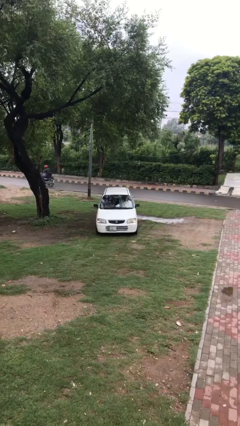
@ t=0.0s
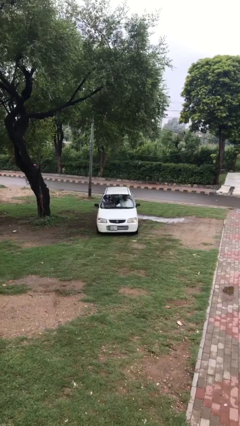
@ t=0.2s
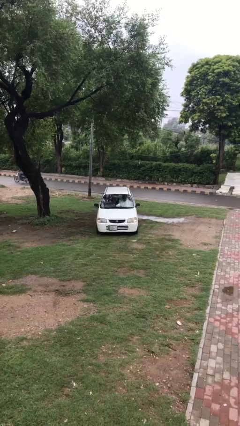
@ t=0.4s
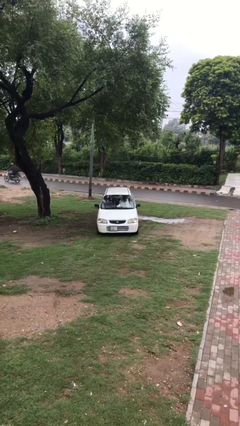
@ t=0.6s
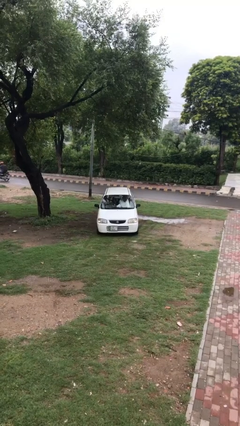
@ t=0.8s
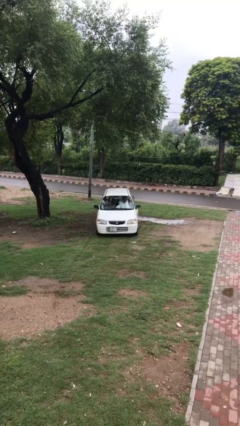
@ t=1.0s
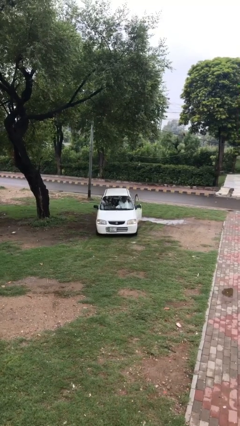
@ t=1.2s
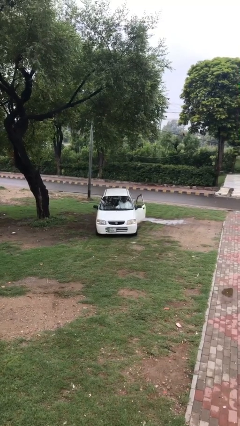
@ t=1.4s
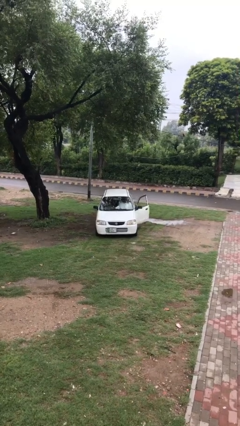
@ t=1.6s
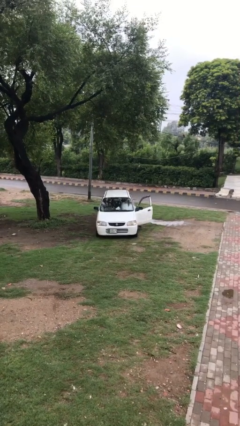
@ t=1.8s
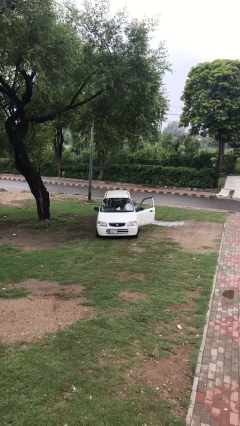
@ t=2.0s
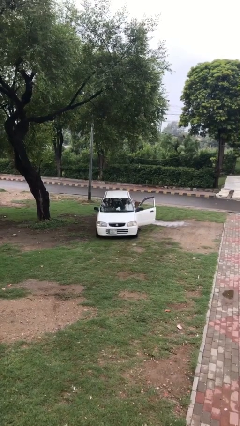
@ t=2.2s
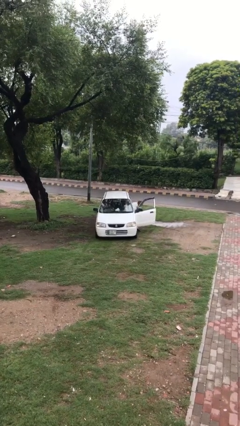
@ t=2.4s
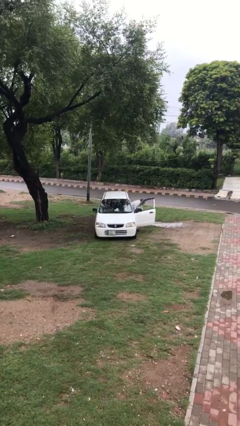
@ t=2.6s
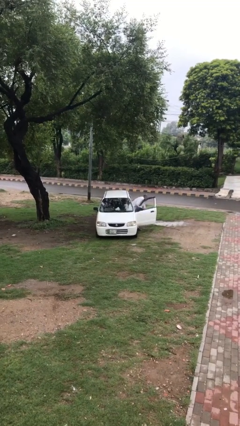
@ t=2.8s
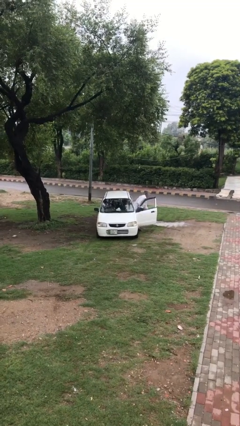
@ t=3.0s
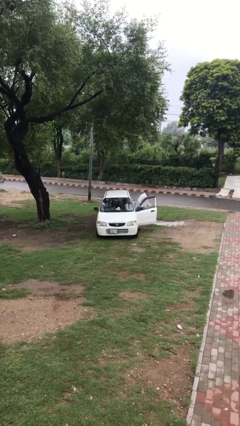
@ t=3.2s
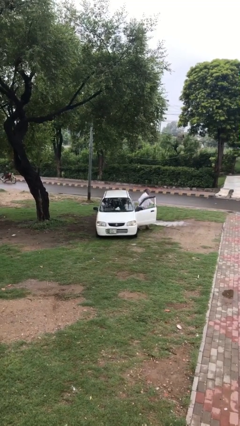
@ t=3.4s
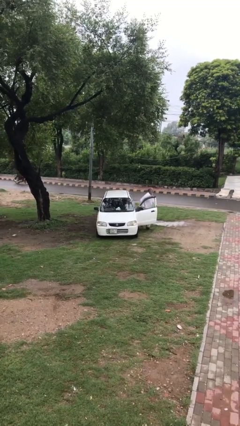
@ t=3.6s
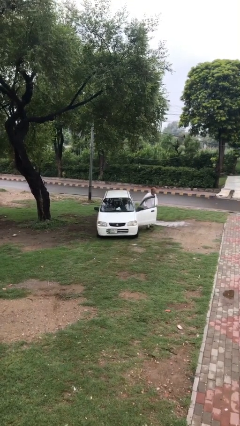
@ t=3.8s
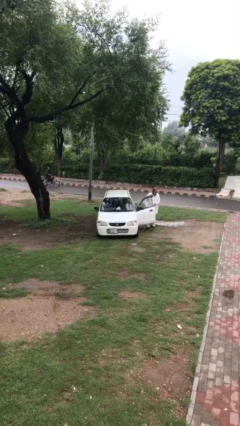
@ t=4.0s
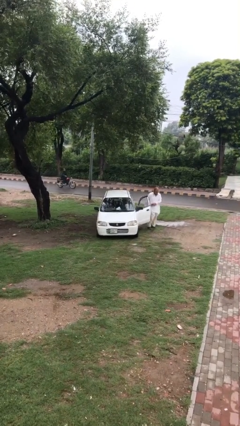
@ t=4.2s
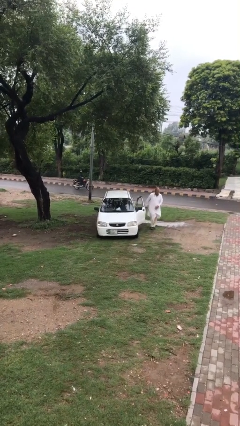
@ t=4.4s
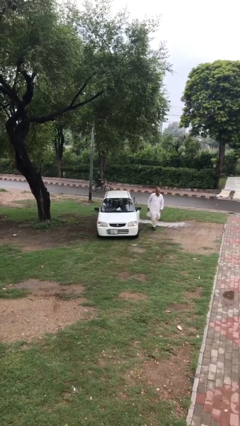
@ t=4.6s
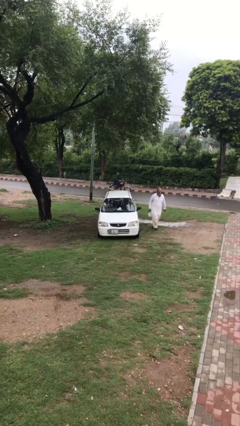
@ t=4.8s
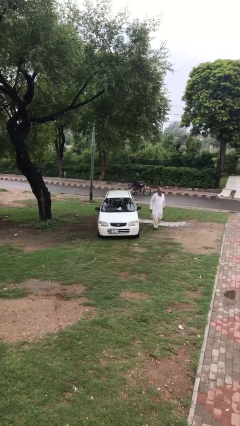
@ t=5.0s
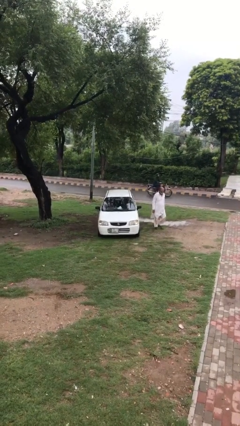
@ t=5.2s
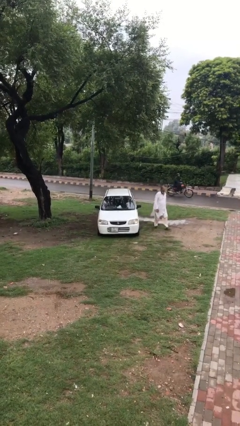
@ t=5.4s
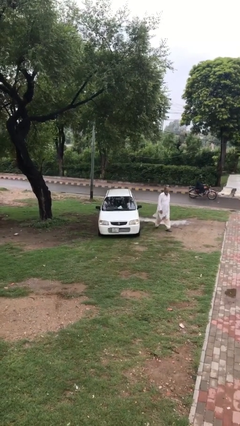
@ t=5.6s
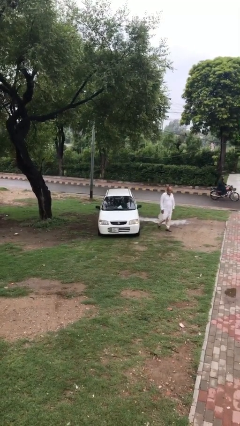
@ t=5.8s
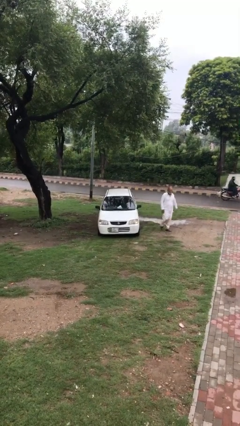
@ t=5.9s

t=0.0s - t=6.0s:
car drops off person

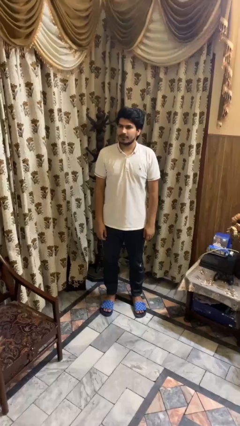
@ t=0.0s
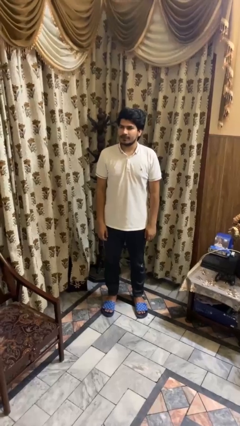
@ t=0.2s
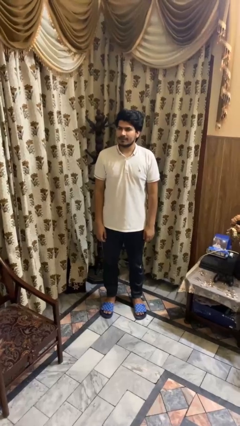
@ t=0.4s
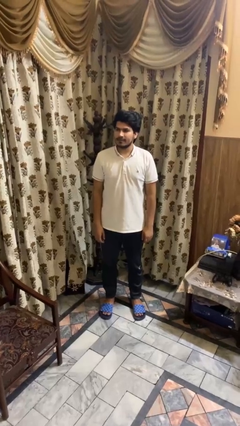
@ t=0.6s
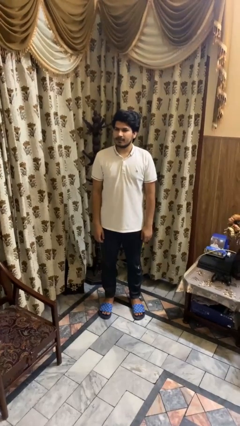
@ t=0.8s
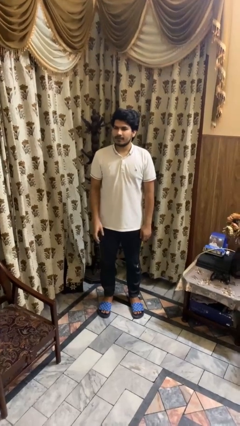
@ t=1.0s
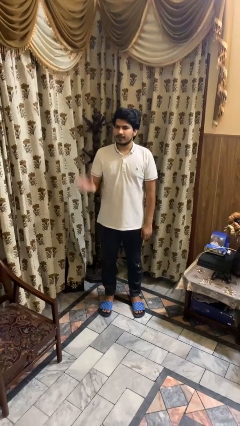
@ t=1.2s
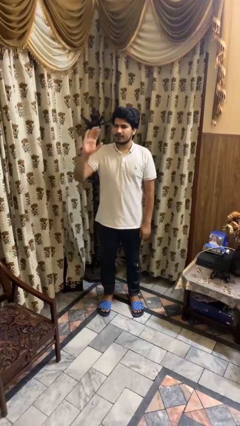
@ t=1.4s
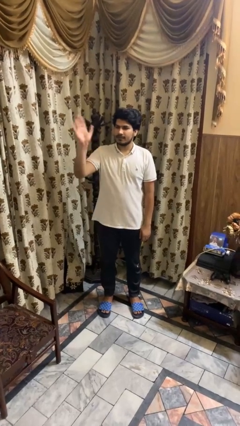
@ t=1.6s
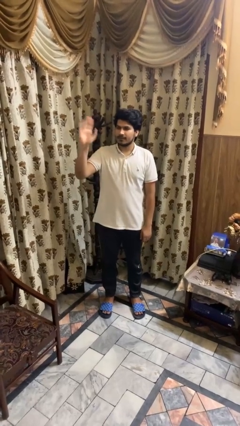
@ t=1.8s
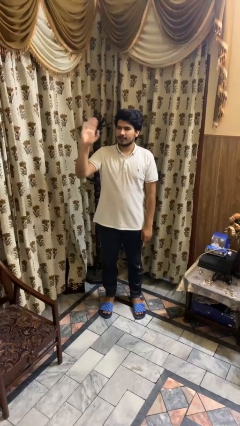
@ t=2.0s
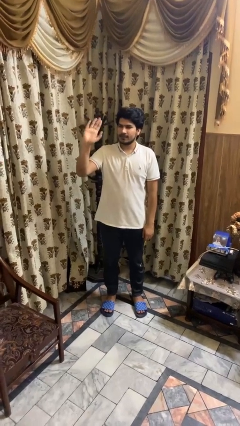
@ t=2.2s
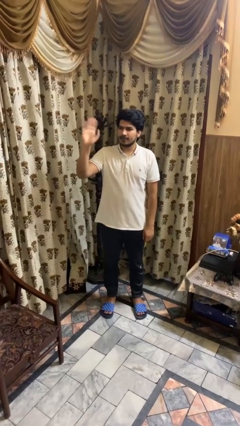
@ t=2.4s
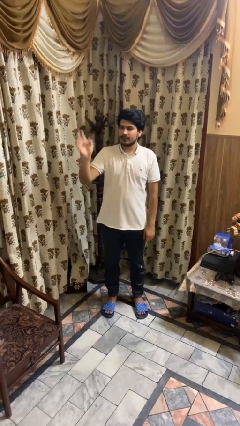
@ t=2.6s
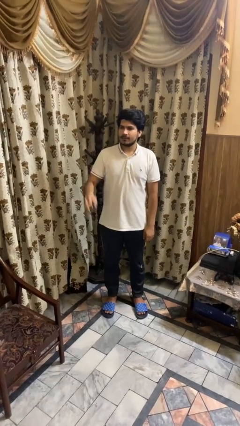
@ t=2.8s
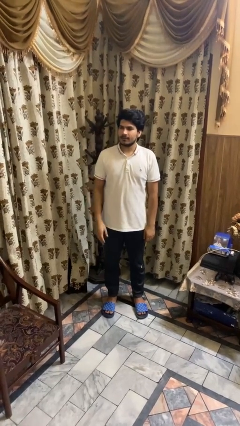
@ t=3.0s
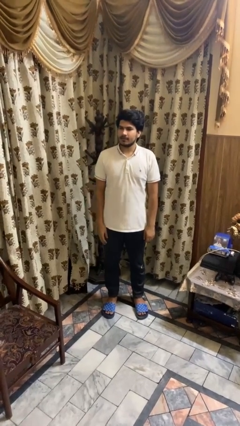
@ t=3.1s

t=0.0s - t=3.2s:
person waves at person

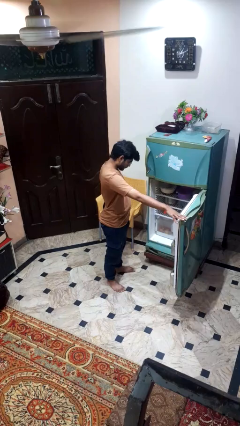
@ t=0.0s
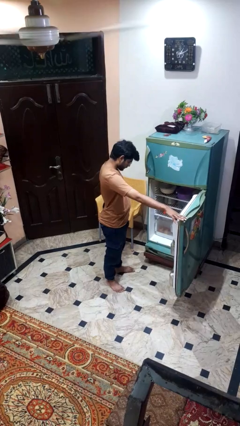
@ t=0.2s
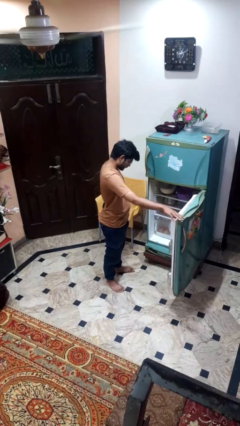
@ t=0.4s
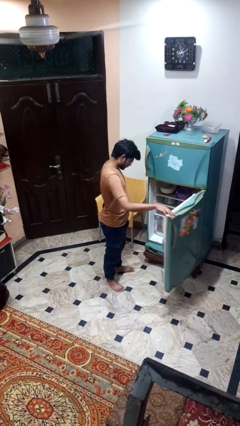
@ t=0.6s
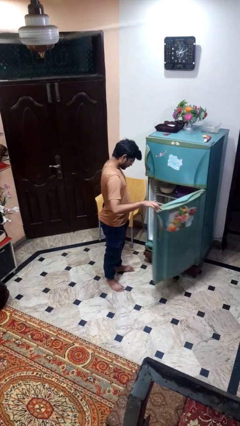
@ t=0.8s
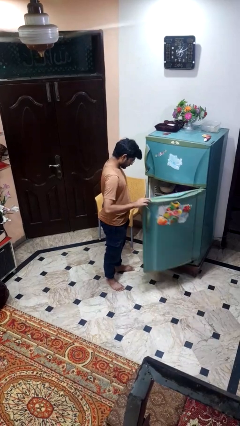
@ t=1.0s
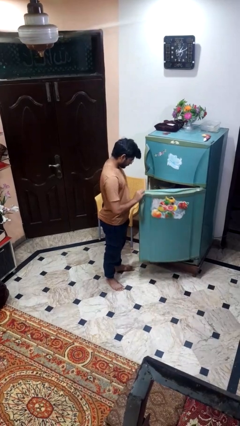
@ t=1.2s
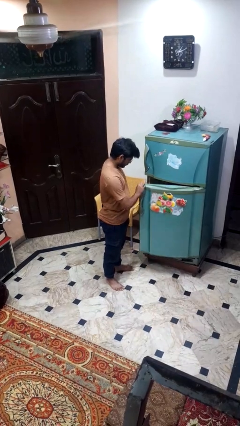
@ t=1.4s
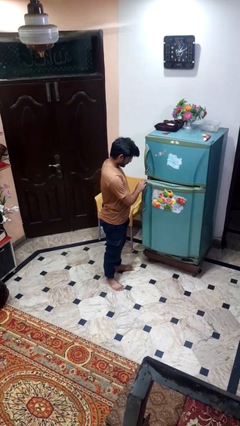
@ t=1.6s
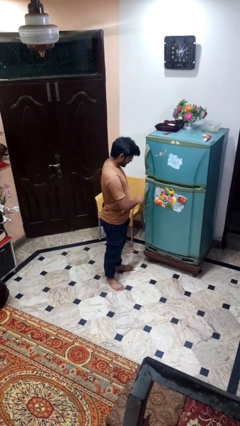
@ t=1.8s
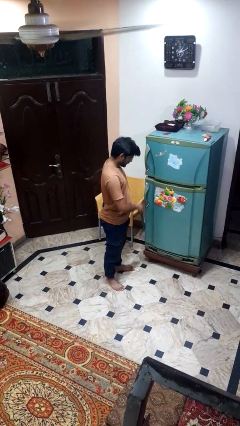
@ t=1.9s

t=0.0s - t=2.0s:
person closes refrigerator

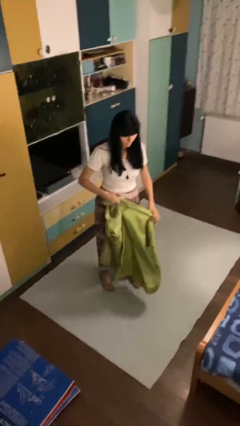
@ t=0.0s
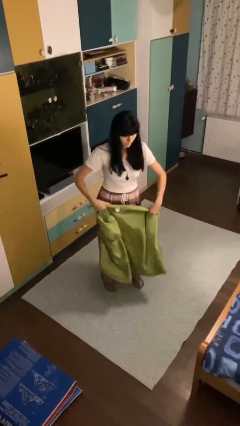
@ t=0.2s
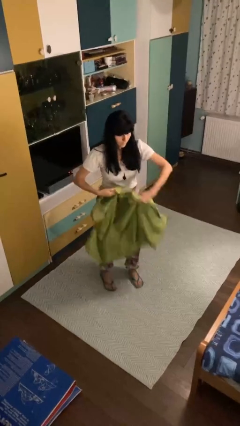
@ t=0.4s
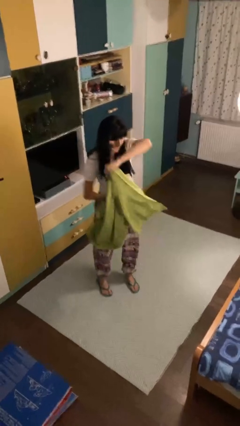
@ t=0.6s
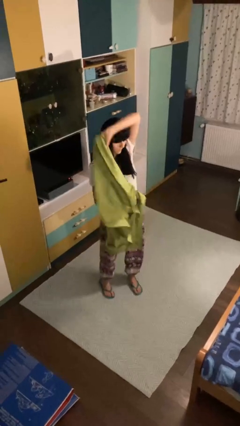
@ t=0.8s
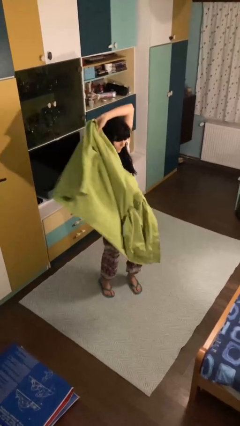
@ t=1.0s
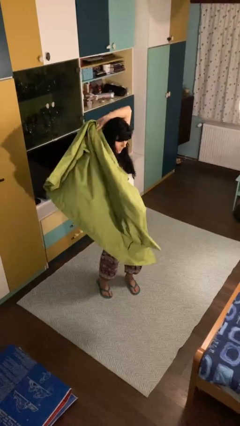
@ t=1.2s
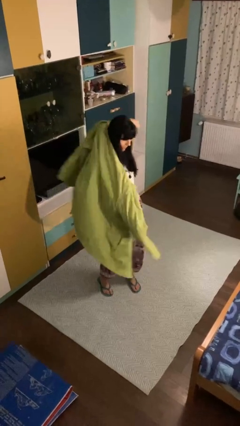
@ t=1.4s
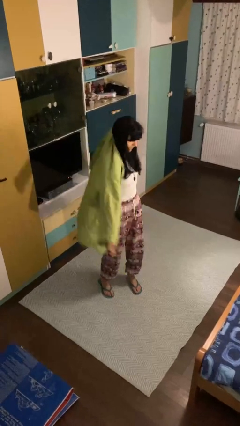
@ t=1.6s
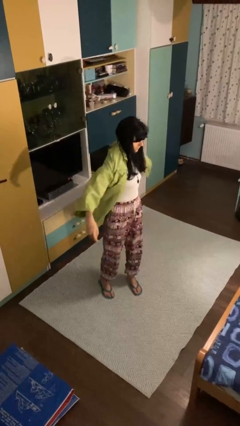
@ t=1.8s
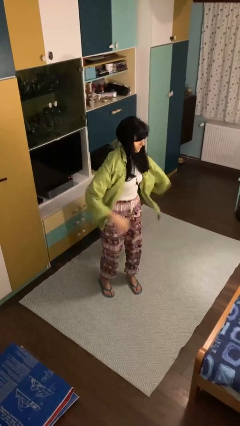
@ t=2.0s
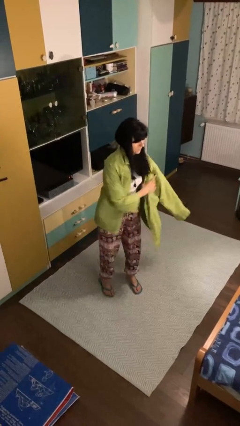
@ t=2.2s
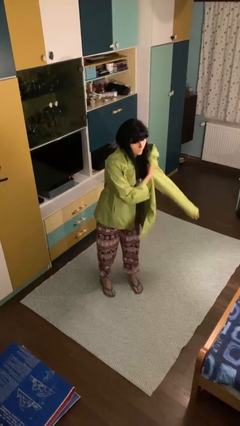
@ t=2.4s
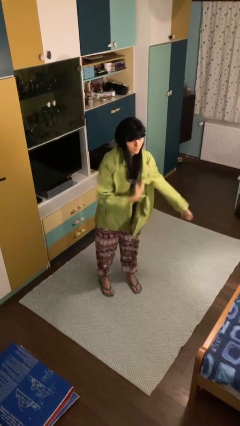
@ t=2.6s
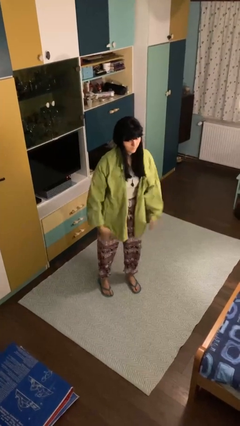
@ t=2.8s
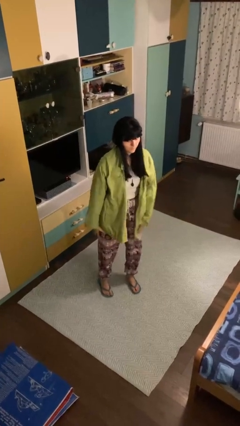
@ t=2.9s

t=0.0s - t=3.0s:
person puts on jacket

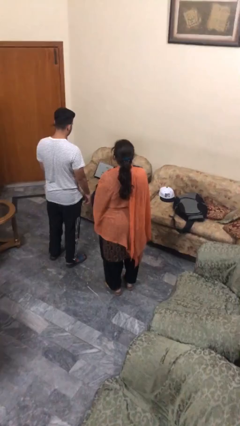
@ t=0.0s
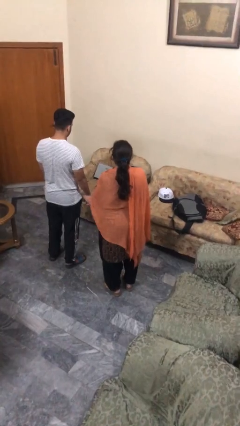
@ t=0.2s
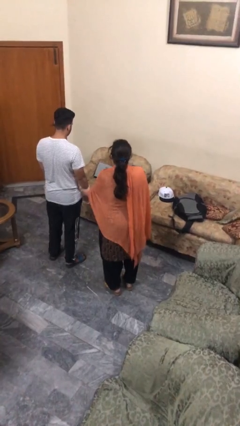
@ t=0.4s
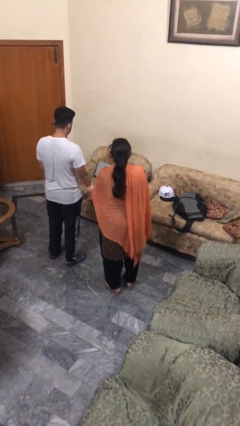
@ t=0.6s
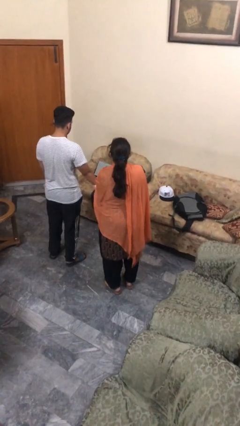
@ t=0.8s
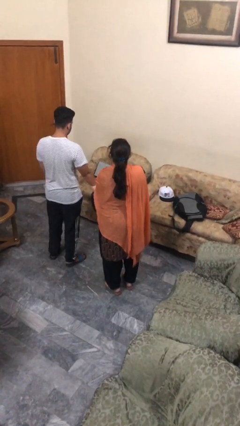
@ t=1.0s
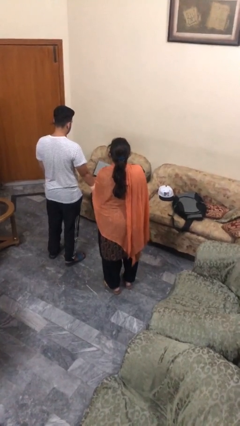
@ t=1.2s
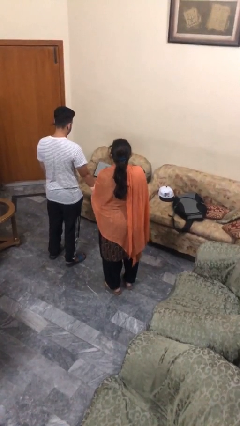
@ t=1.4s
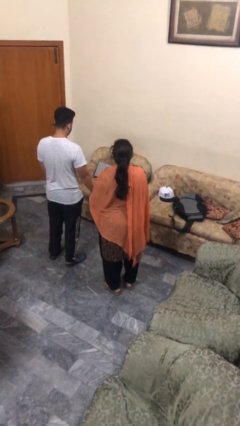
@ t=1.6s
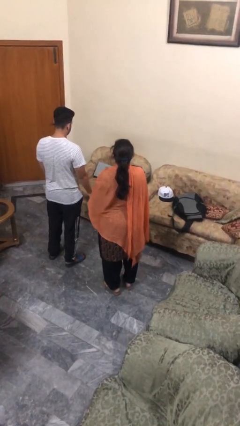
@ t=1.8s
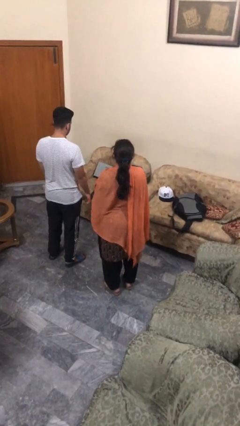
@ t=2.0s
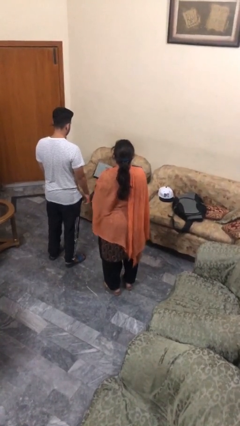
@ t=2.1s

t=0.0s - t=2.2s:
person grabs person by forearm

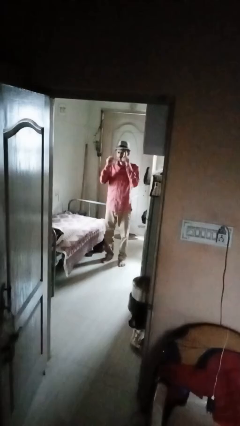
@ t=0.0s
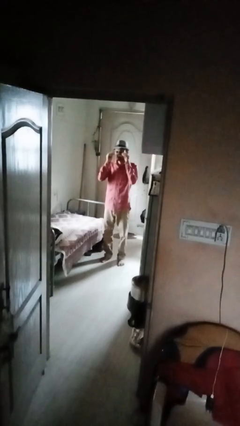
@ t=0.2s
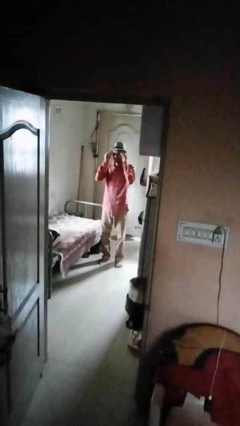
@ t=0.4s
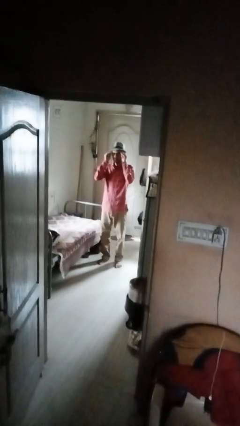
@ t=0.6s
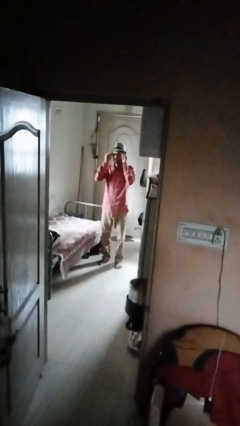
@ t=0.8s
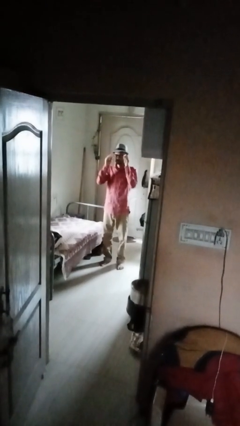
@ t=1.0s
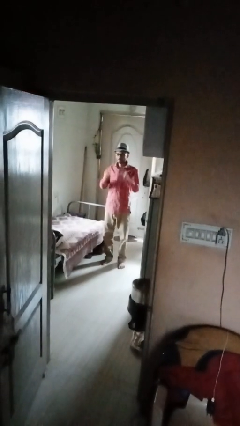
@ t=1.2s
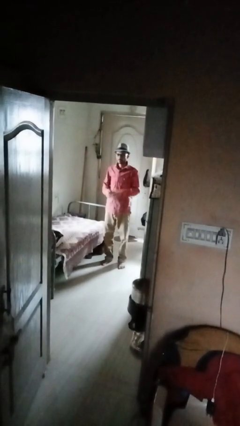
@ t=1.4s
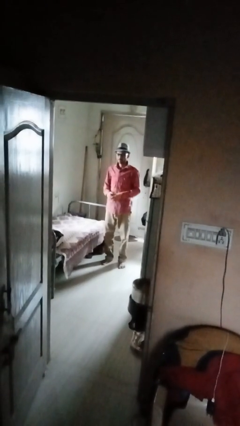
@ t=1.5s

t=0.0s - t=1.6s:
person puts on glasses
